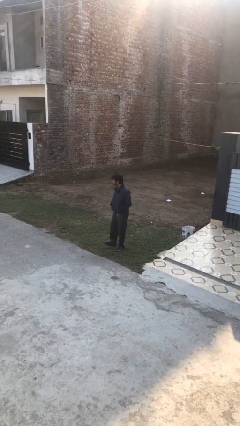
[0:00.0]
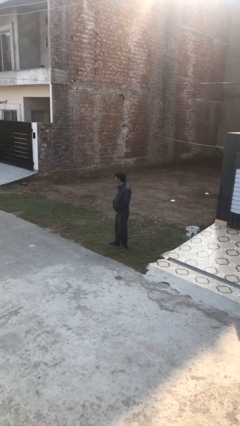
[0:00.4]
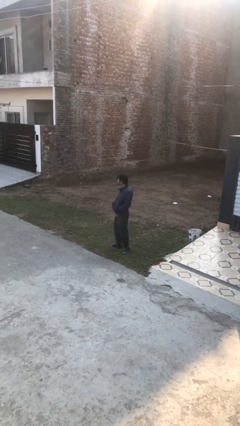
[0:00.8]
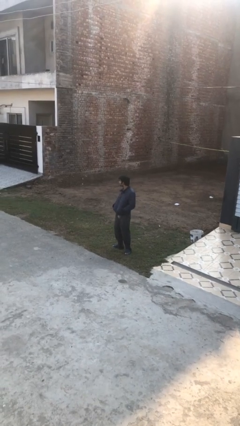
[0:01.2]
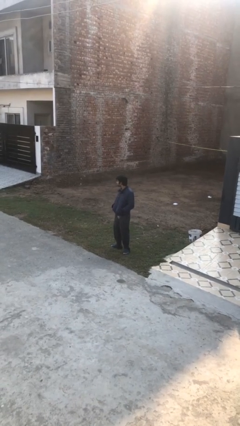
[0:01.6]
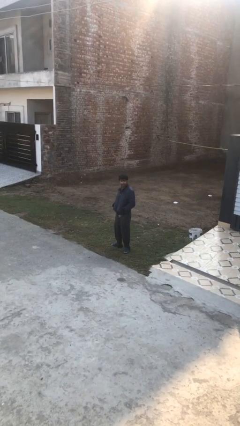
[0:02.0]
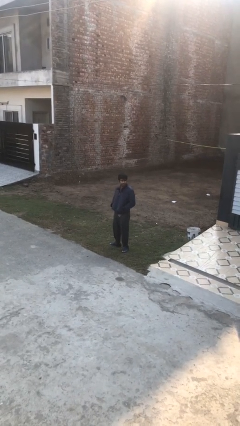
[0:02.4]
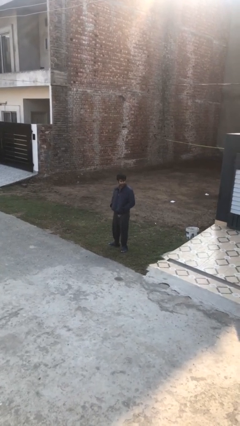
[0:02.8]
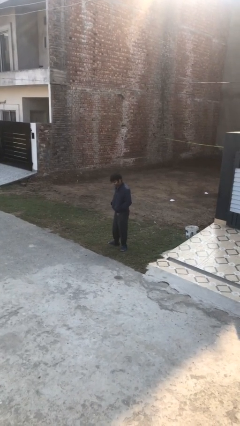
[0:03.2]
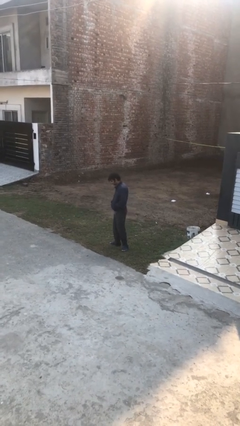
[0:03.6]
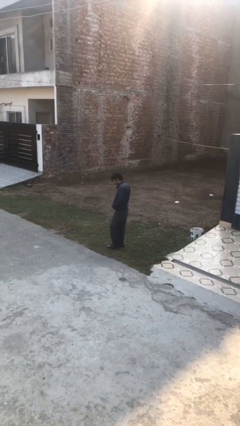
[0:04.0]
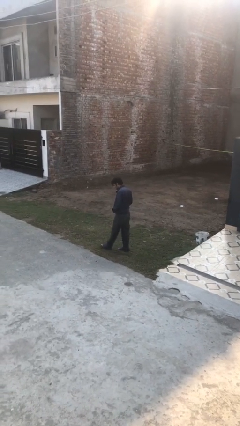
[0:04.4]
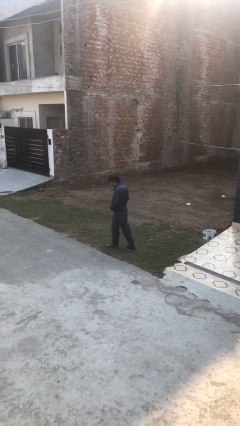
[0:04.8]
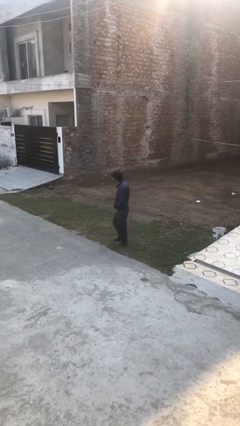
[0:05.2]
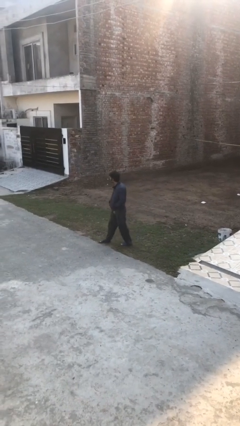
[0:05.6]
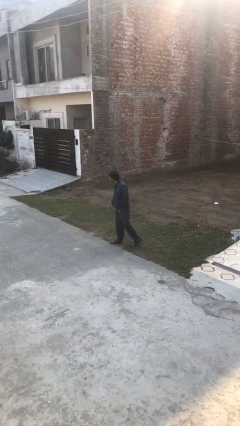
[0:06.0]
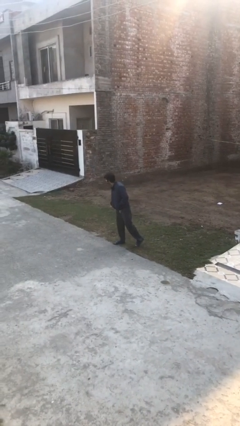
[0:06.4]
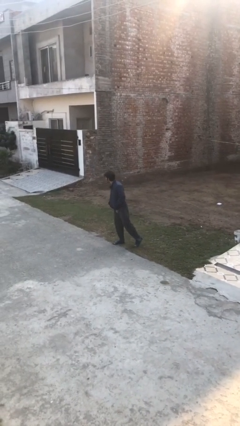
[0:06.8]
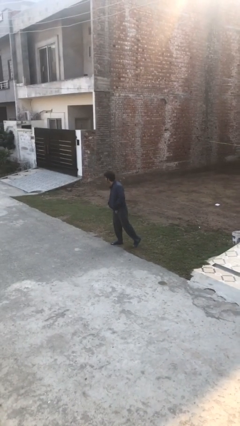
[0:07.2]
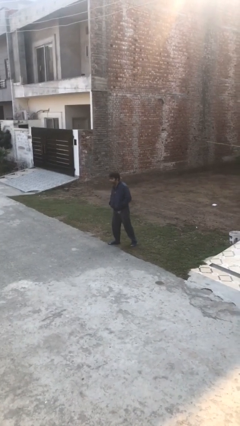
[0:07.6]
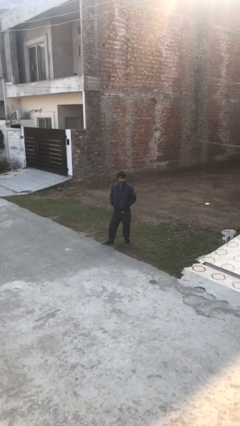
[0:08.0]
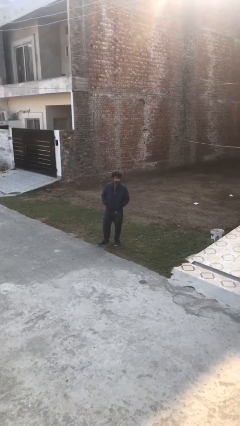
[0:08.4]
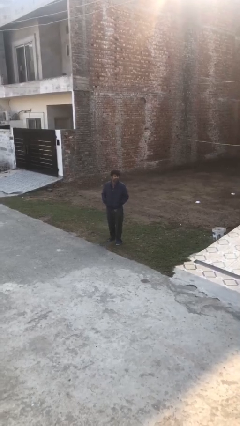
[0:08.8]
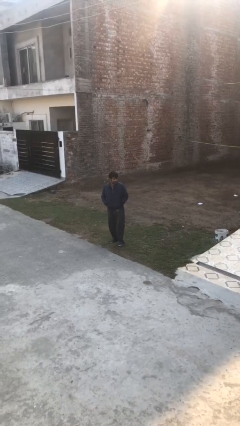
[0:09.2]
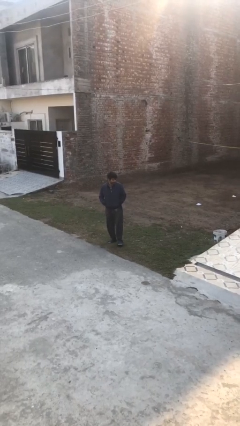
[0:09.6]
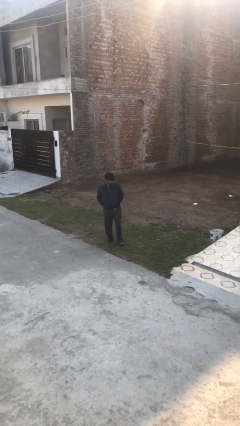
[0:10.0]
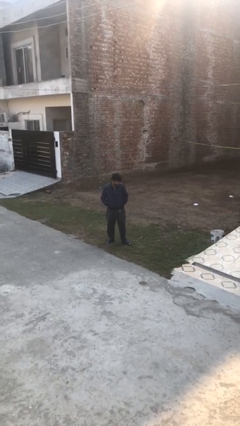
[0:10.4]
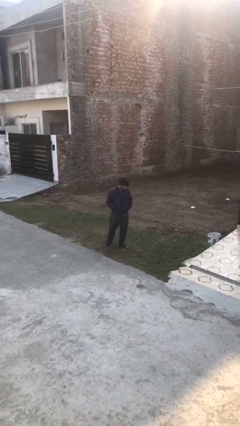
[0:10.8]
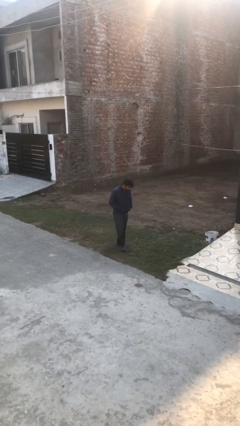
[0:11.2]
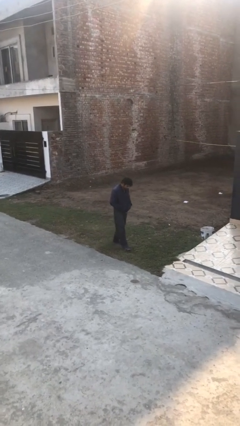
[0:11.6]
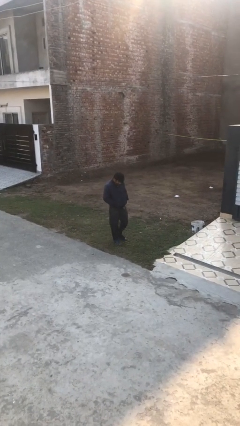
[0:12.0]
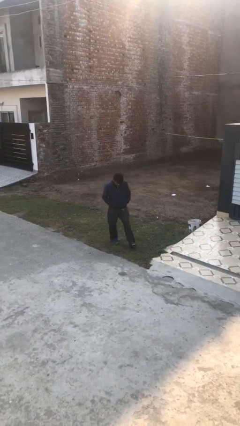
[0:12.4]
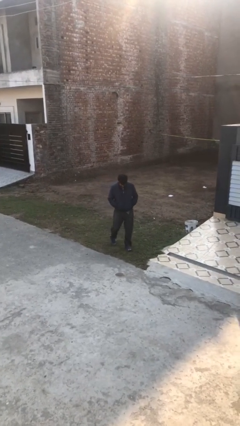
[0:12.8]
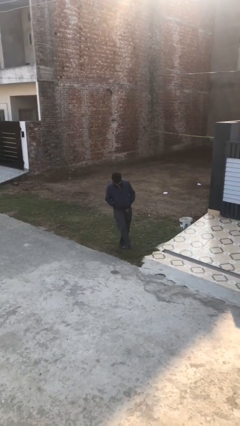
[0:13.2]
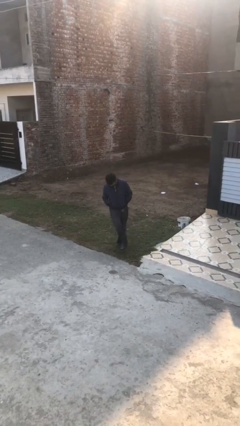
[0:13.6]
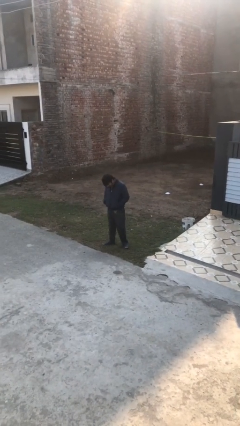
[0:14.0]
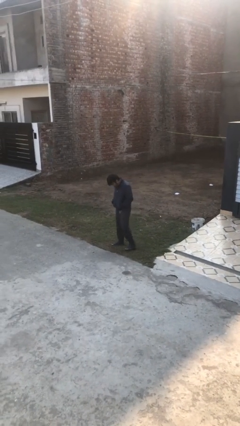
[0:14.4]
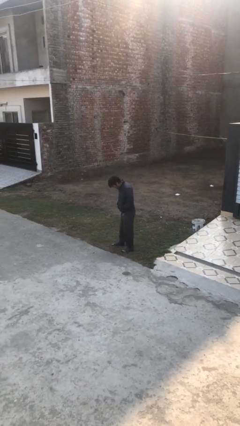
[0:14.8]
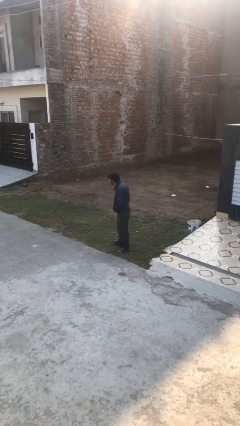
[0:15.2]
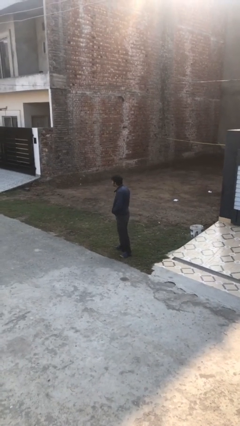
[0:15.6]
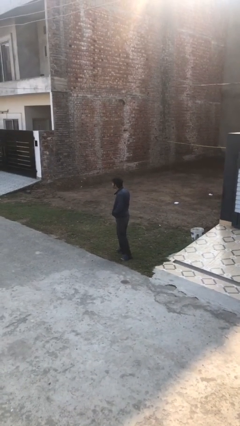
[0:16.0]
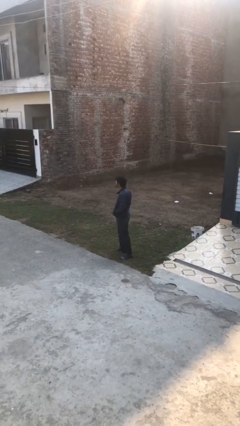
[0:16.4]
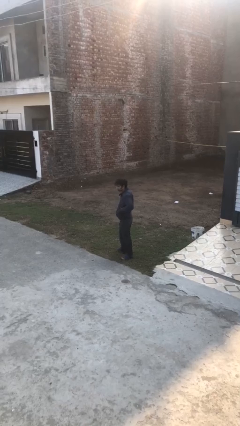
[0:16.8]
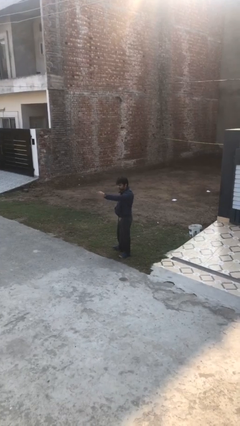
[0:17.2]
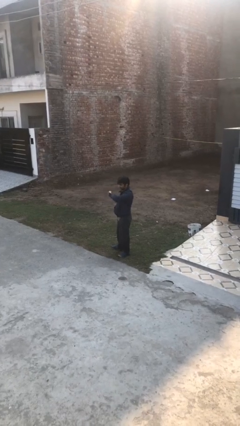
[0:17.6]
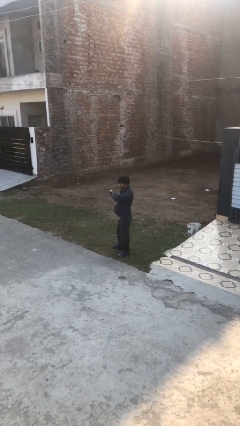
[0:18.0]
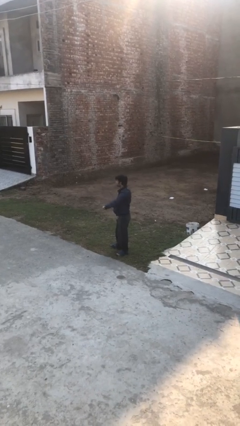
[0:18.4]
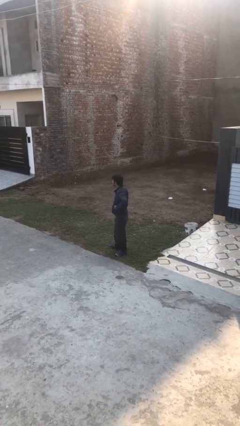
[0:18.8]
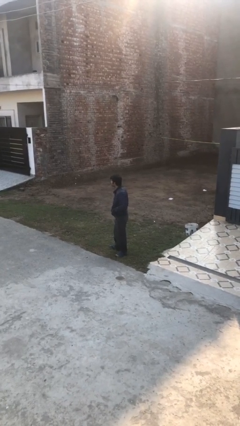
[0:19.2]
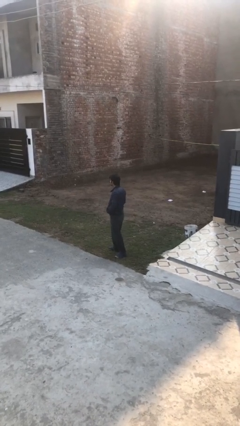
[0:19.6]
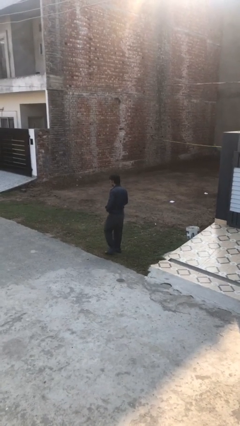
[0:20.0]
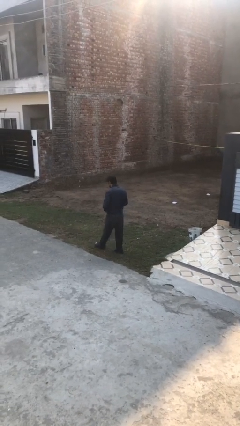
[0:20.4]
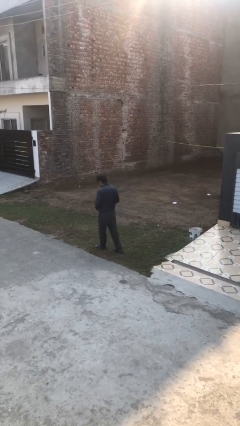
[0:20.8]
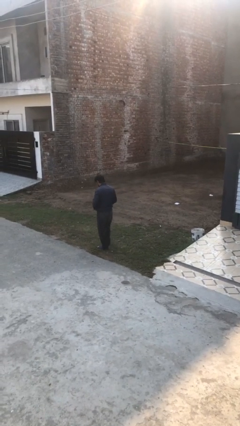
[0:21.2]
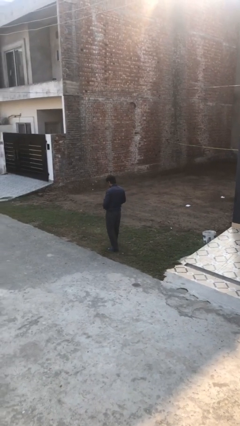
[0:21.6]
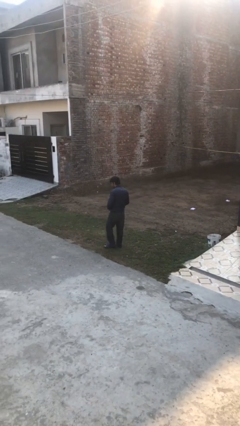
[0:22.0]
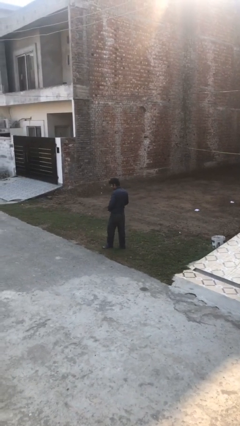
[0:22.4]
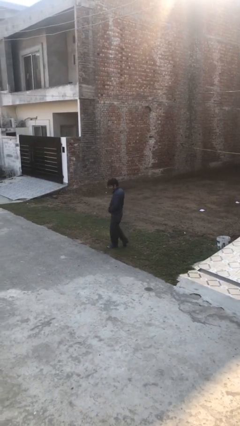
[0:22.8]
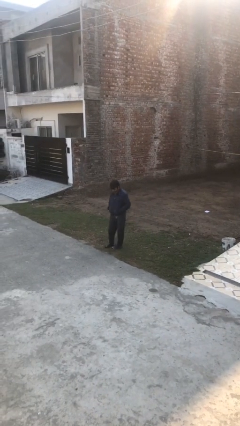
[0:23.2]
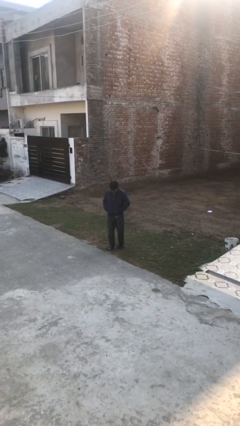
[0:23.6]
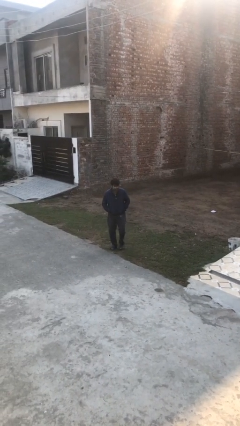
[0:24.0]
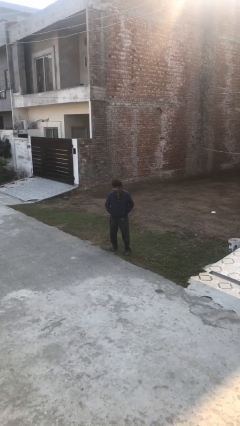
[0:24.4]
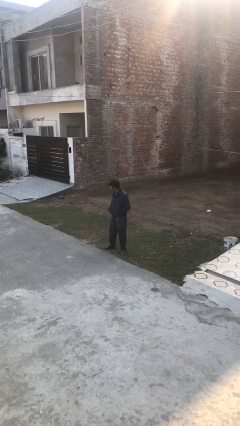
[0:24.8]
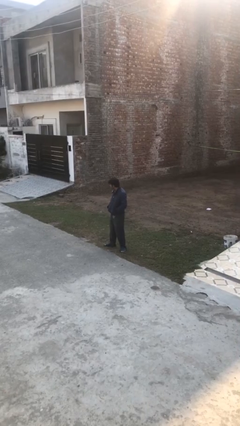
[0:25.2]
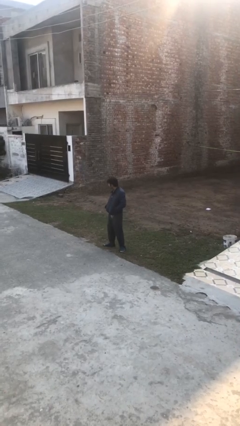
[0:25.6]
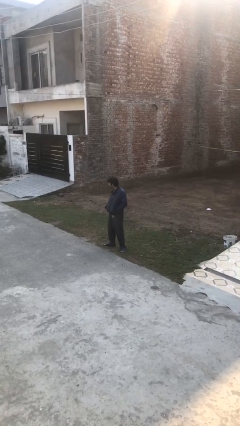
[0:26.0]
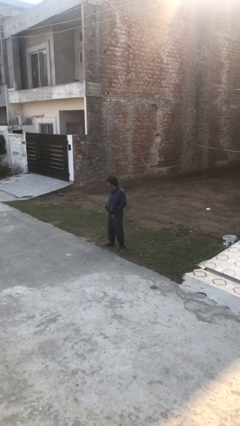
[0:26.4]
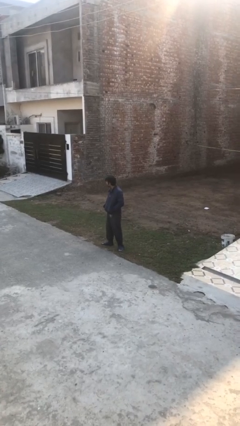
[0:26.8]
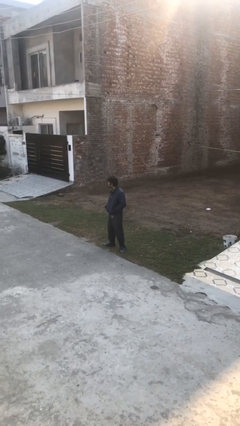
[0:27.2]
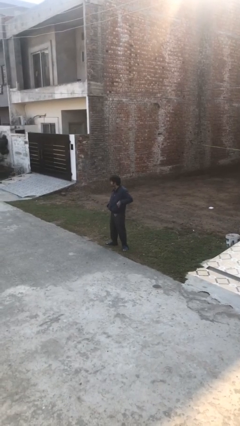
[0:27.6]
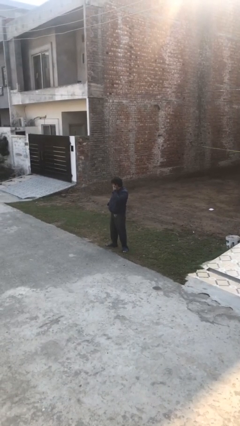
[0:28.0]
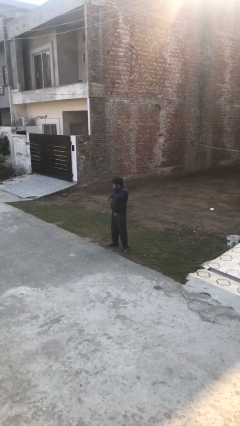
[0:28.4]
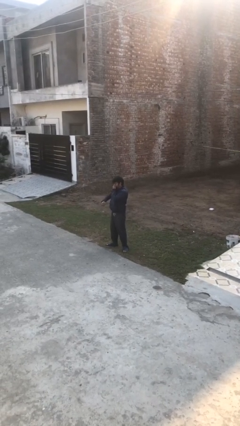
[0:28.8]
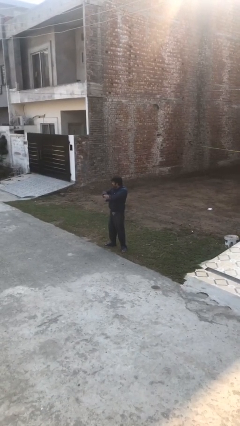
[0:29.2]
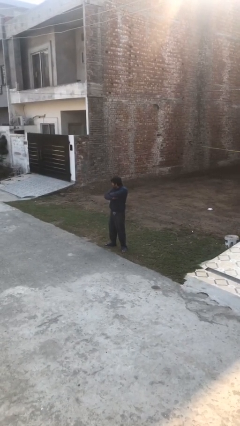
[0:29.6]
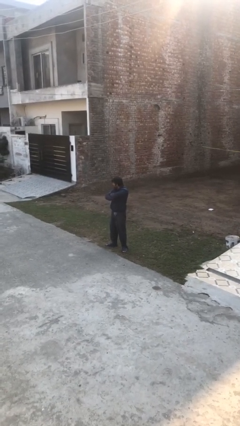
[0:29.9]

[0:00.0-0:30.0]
person walks

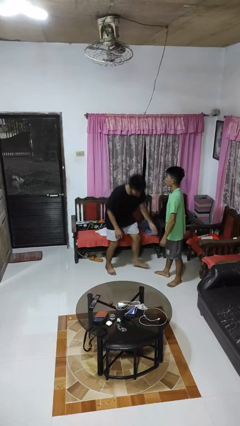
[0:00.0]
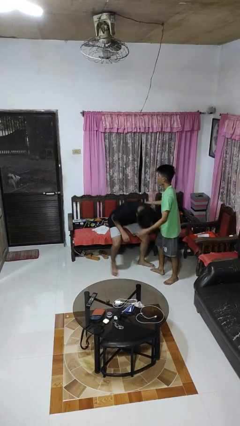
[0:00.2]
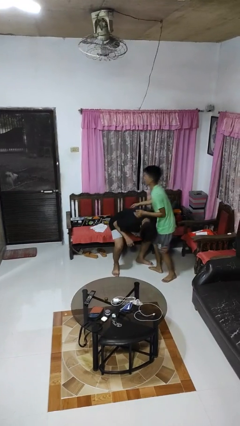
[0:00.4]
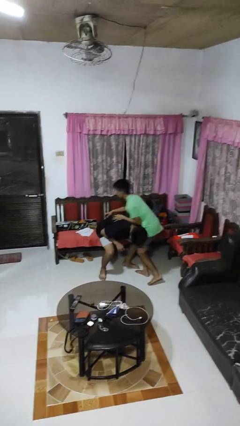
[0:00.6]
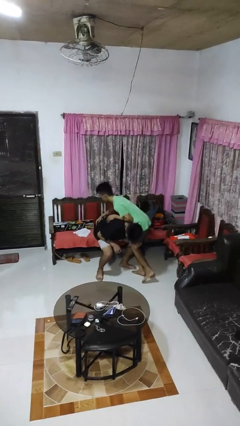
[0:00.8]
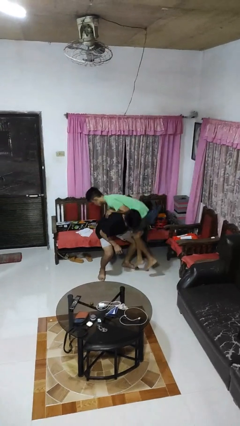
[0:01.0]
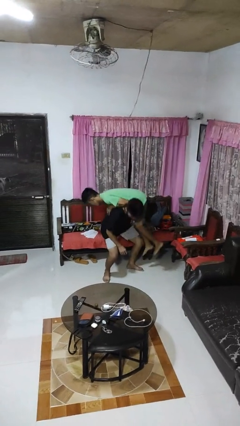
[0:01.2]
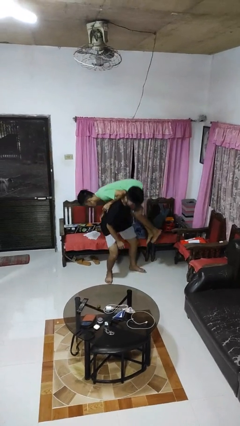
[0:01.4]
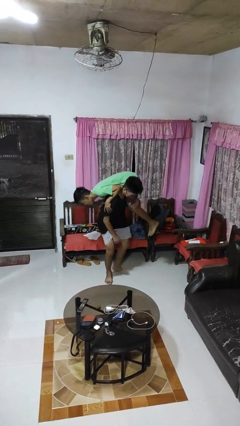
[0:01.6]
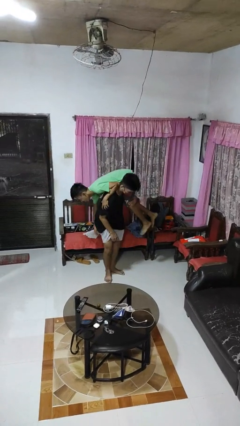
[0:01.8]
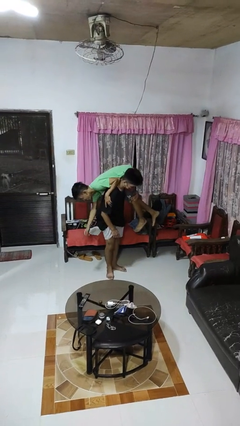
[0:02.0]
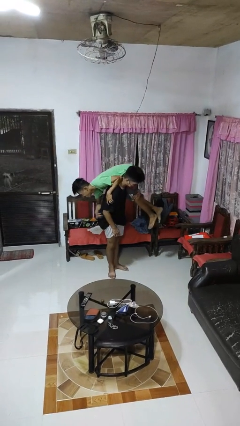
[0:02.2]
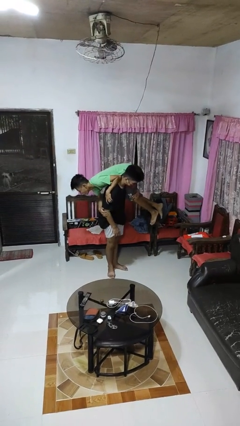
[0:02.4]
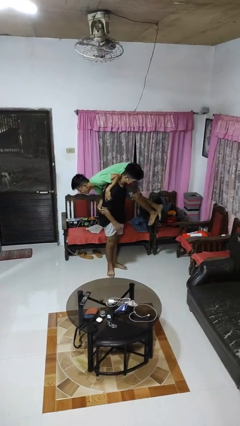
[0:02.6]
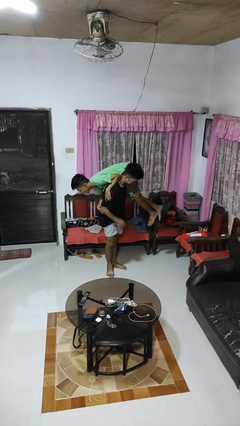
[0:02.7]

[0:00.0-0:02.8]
person carries person over shoulder

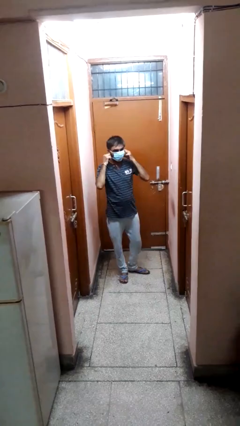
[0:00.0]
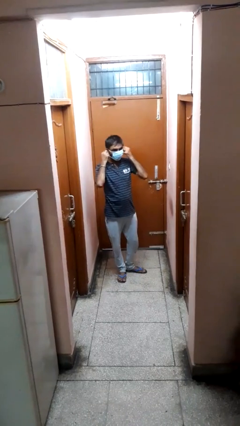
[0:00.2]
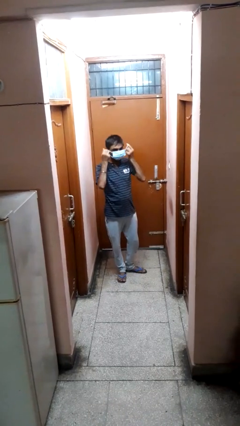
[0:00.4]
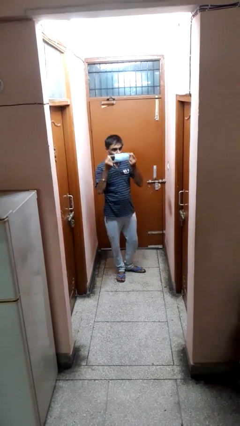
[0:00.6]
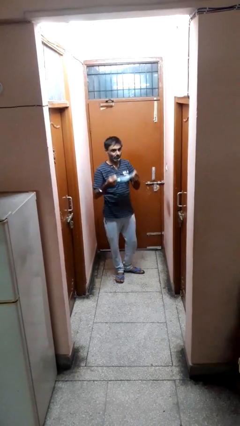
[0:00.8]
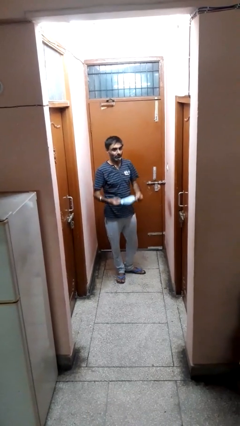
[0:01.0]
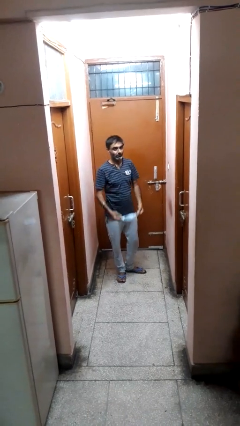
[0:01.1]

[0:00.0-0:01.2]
person takes off facemask
